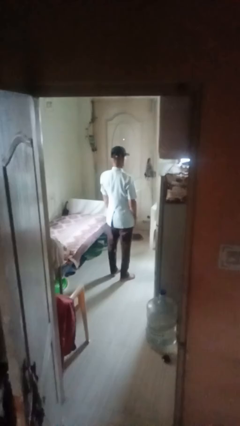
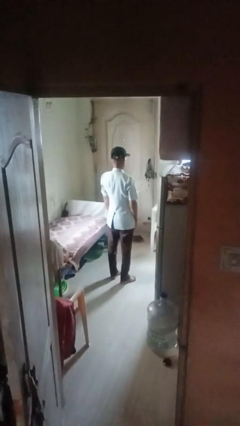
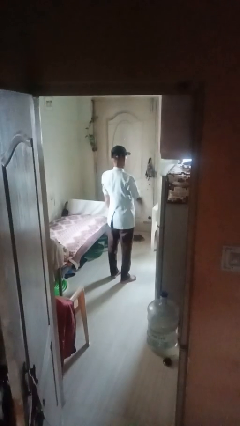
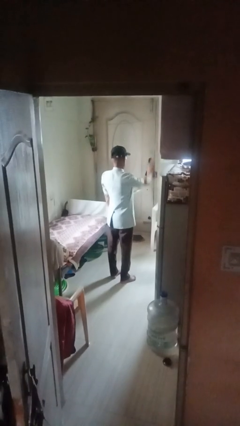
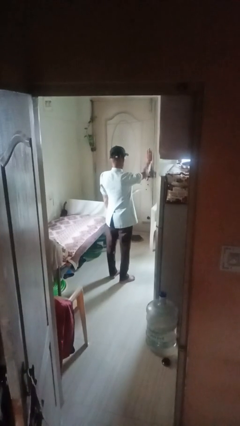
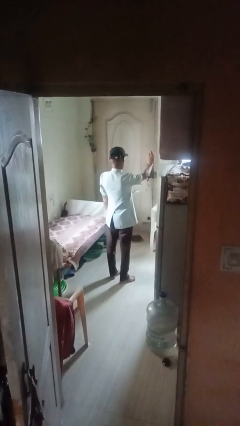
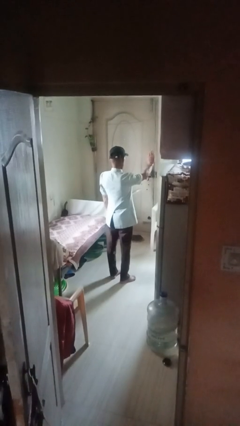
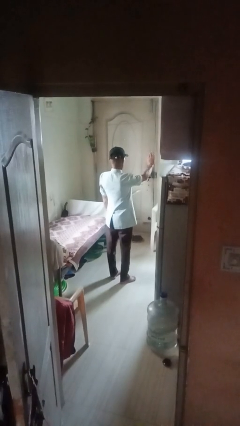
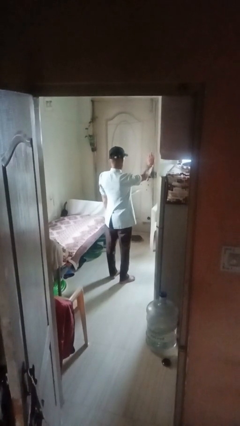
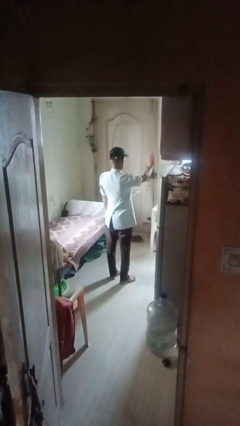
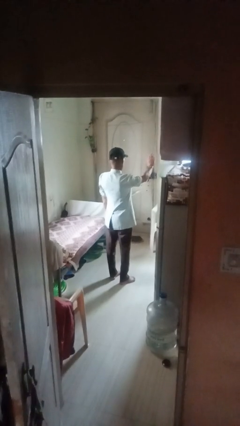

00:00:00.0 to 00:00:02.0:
person gestures stop

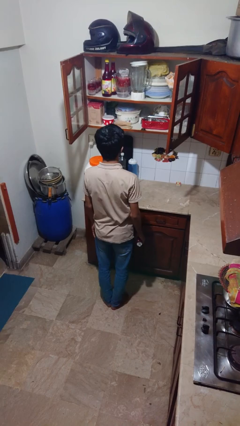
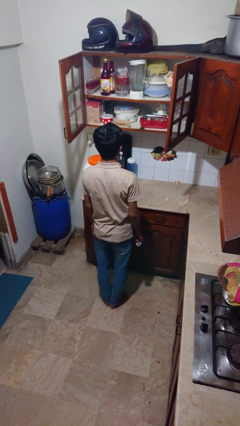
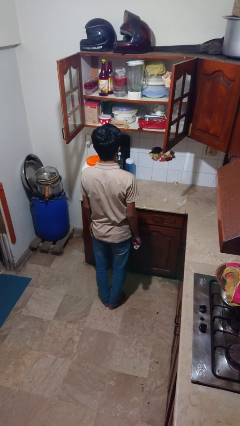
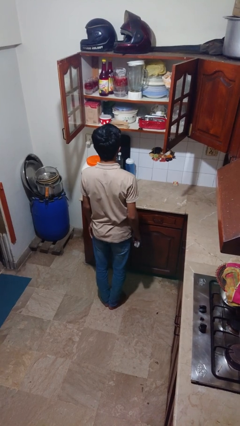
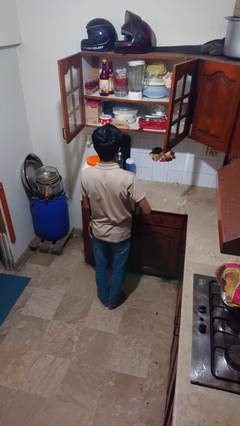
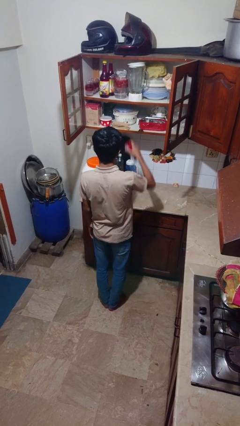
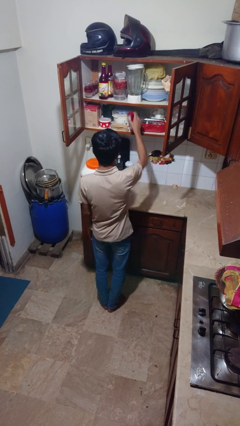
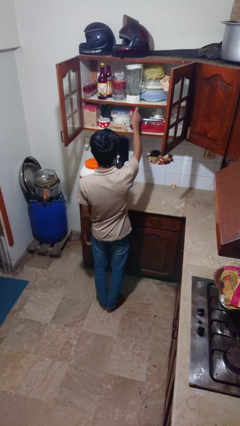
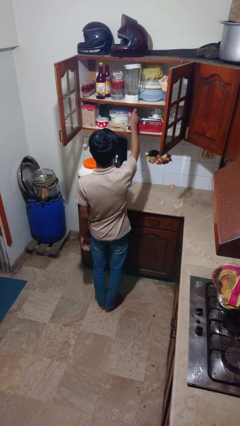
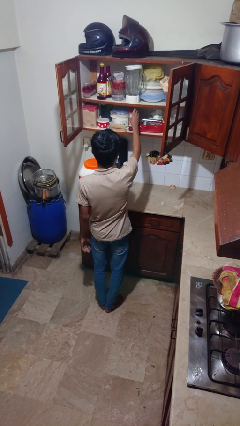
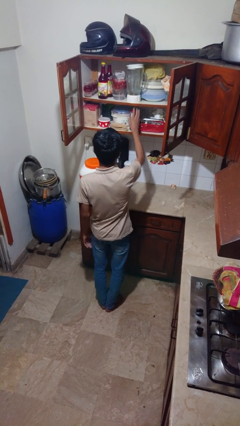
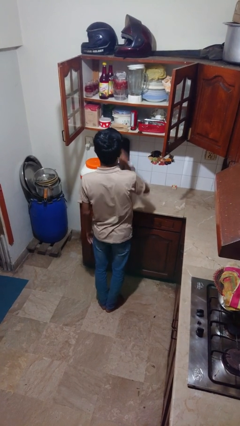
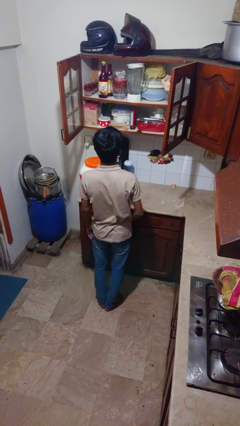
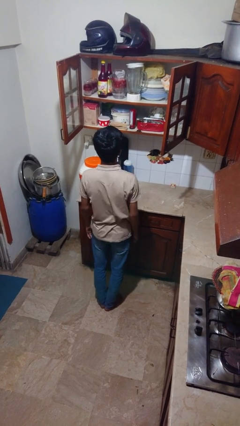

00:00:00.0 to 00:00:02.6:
person puts down object into cabinet

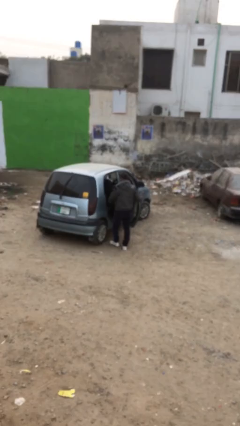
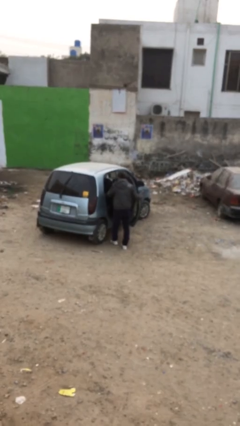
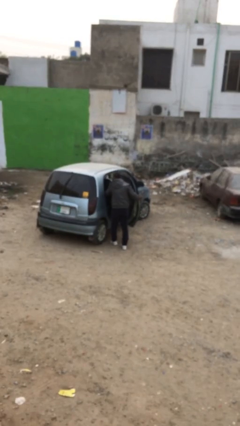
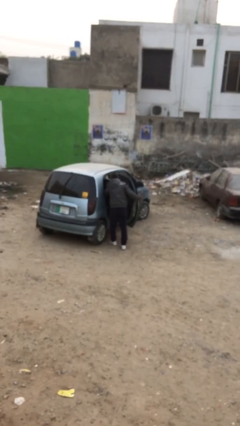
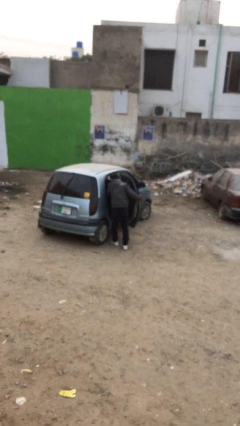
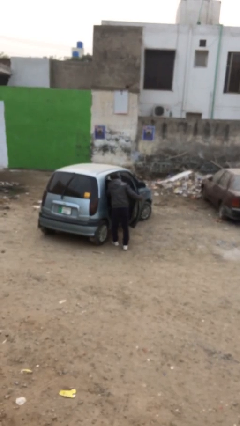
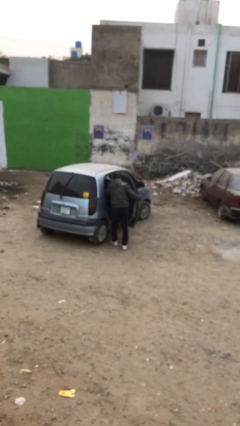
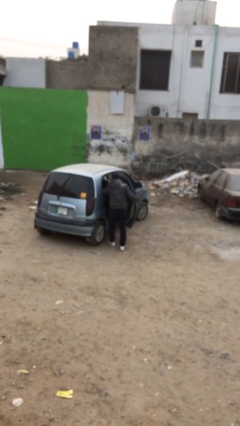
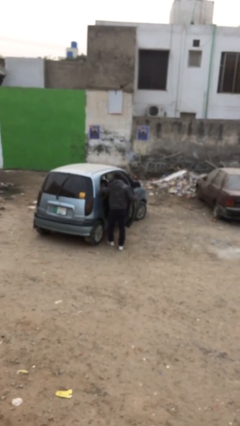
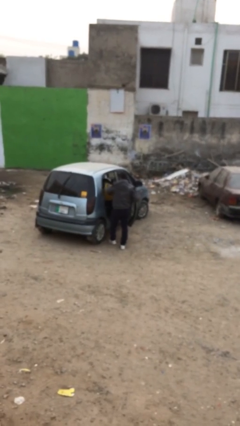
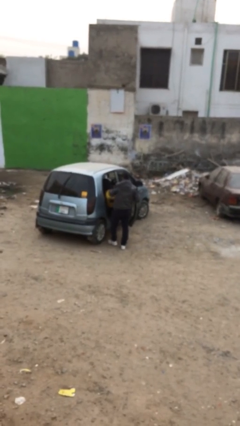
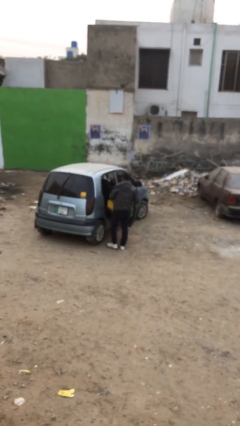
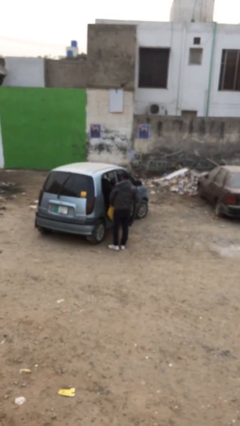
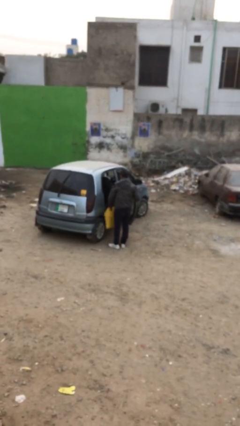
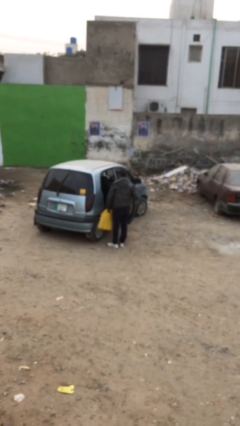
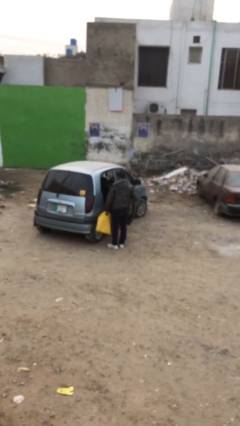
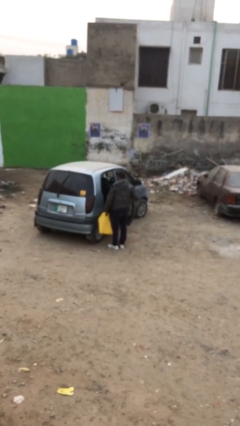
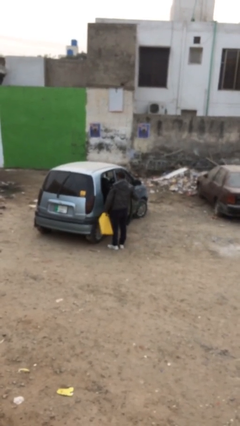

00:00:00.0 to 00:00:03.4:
person unloads car

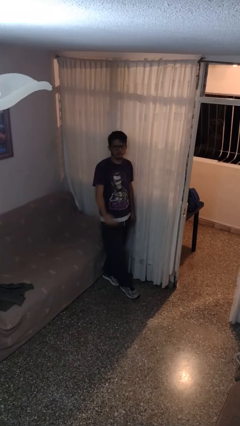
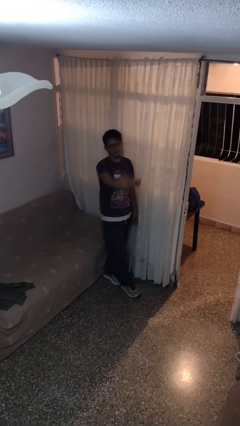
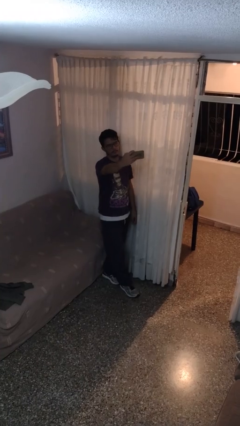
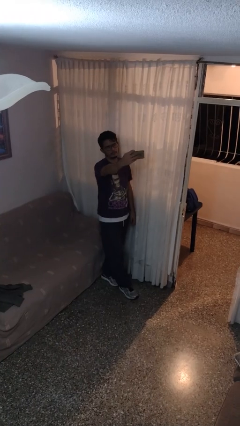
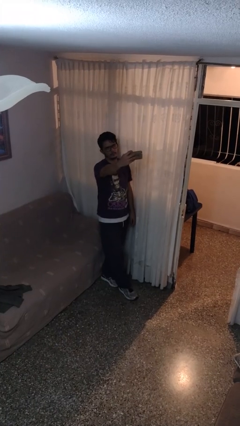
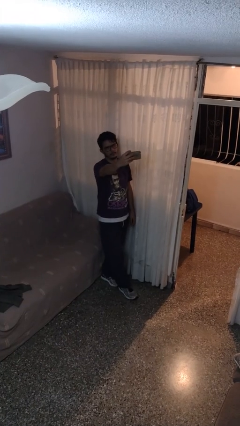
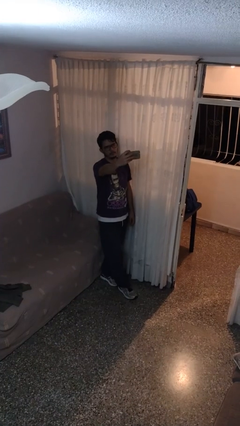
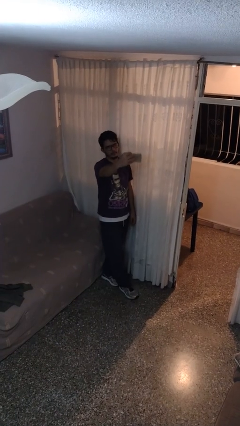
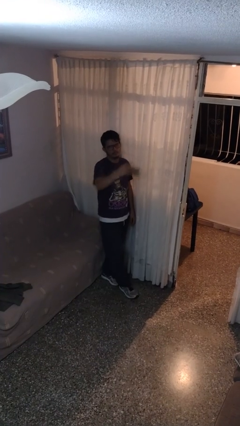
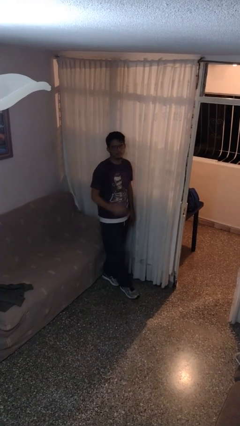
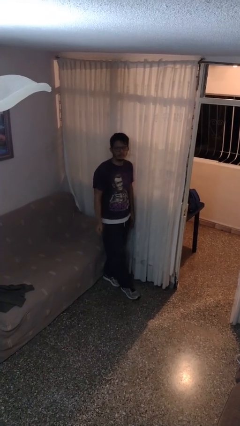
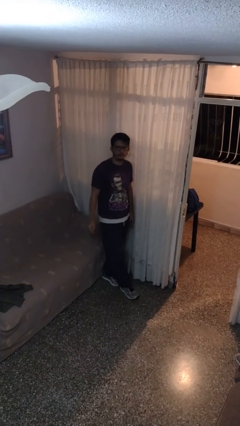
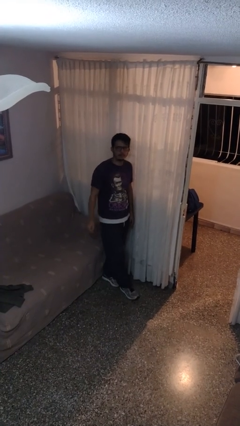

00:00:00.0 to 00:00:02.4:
person takes selfie

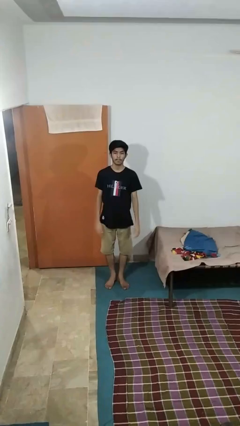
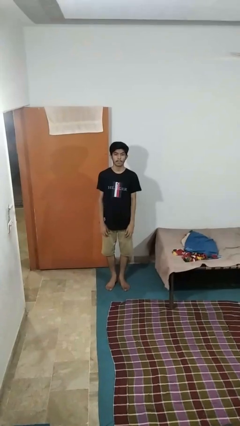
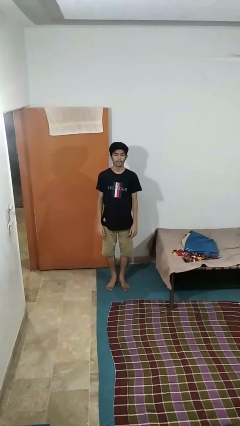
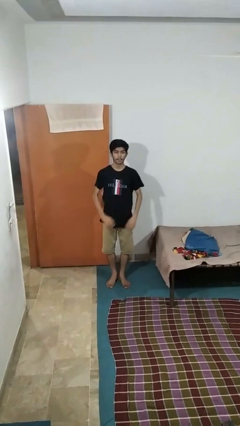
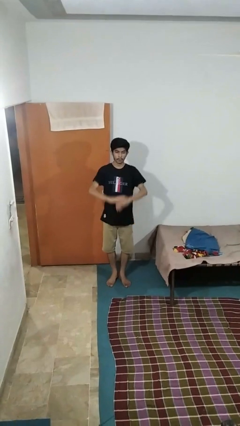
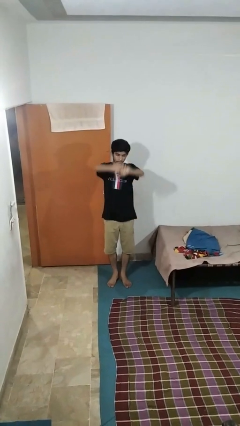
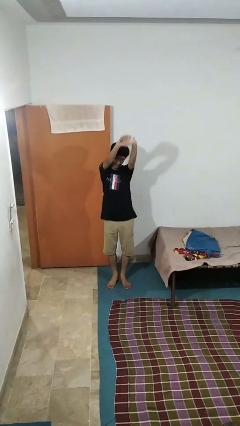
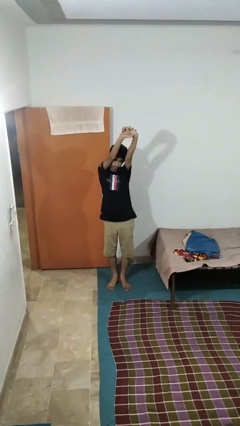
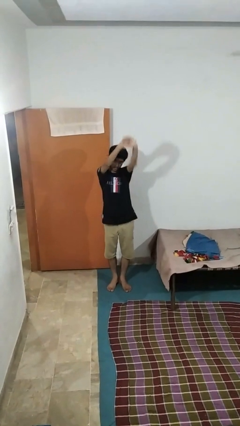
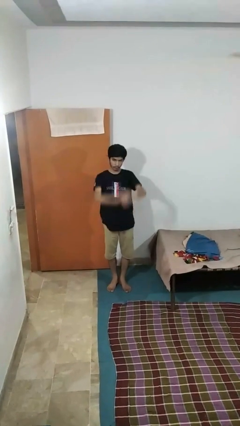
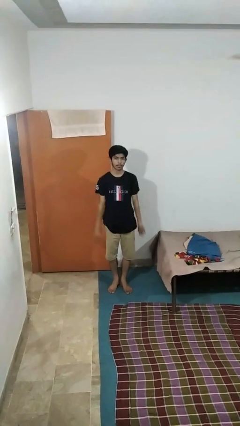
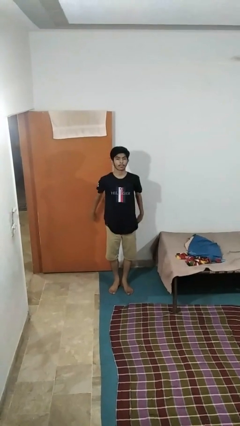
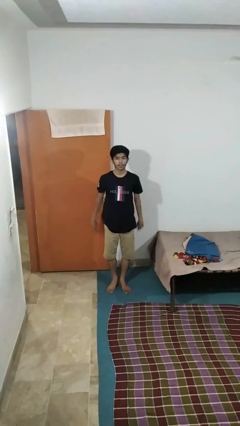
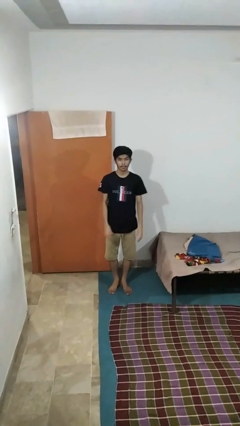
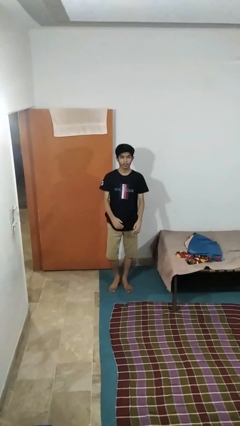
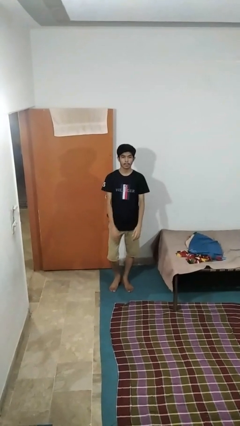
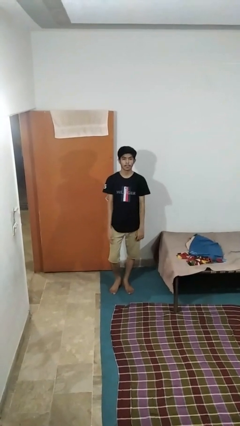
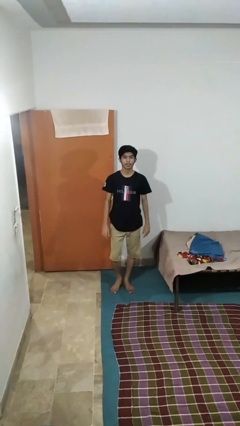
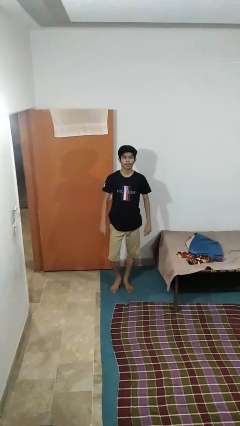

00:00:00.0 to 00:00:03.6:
person stretches arms over head

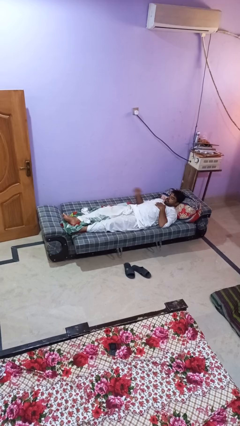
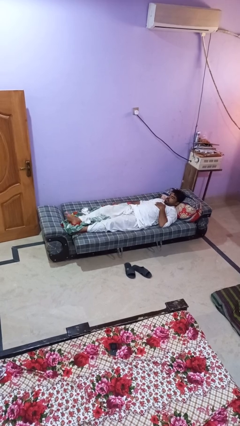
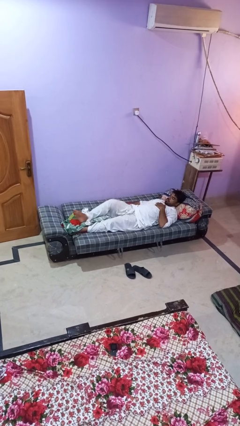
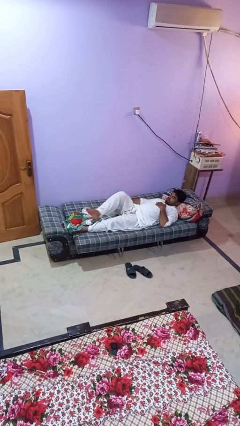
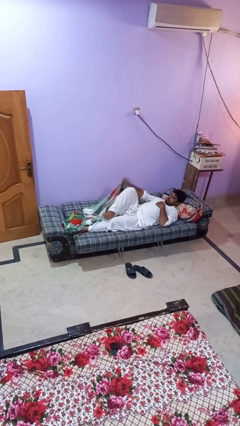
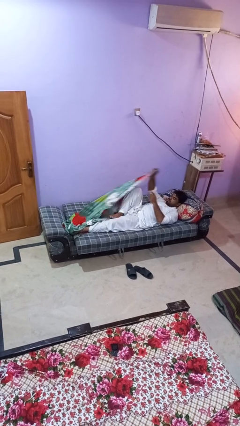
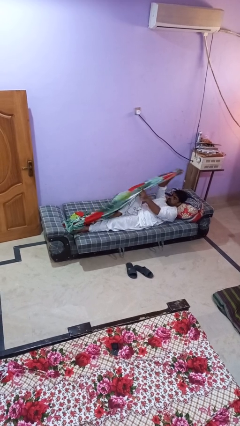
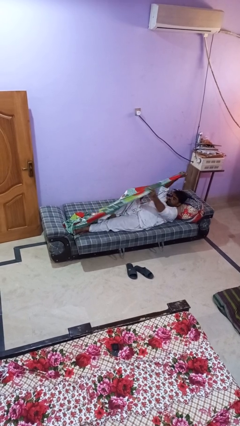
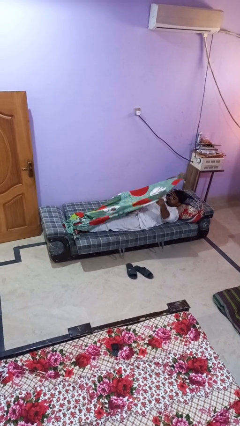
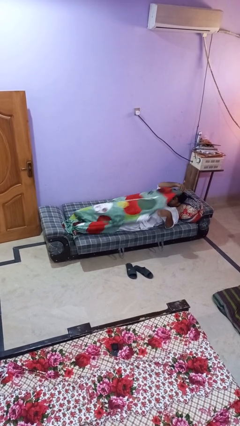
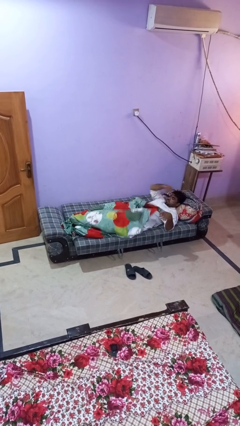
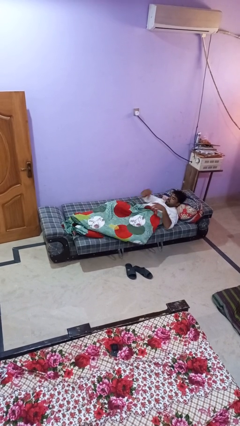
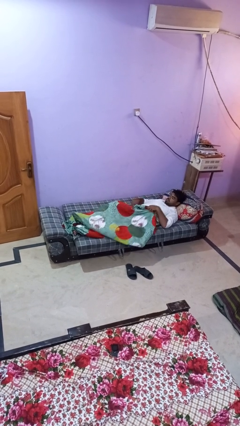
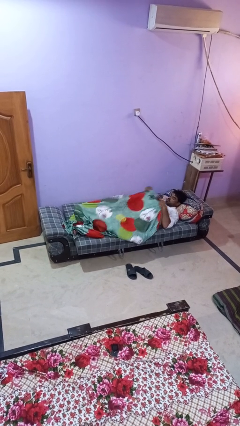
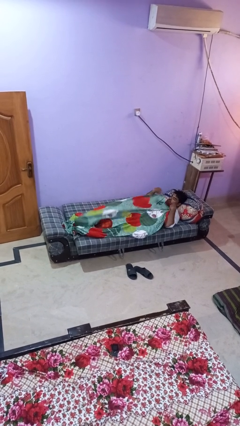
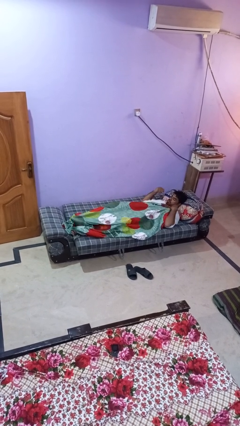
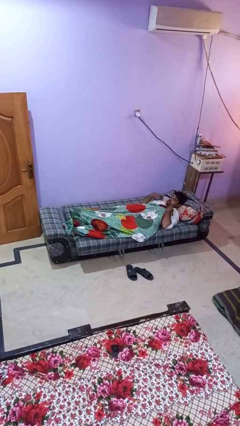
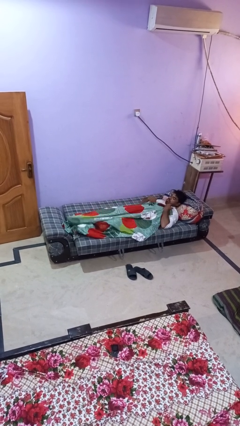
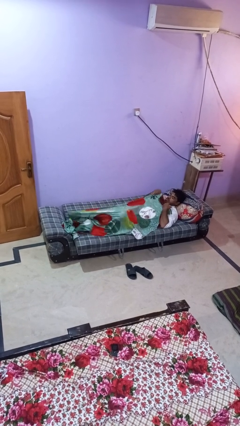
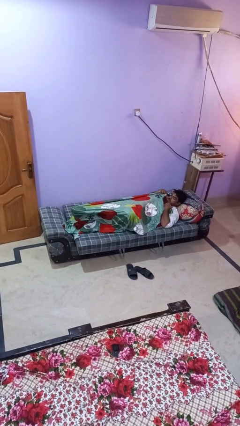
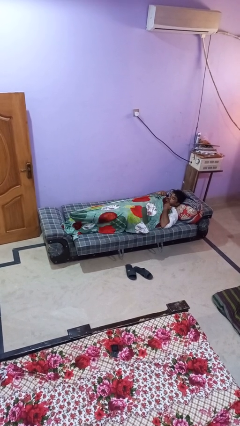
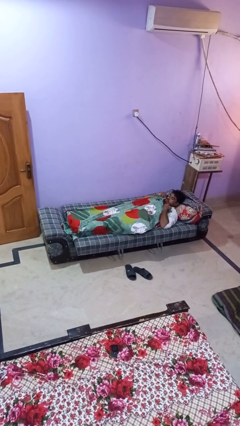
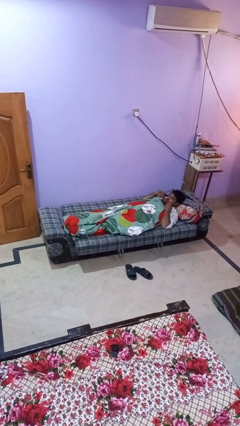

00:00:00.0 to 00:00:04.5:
person covers with bedsheets
